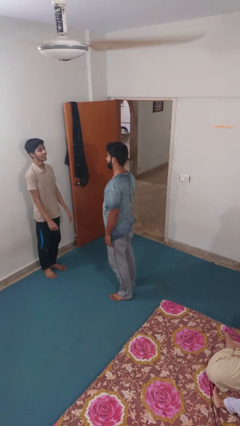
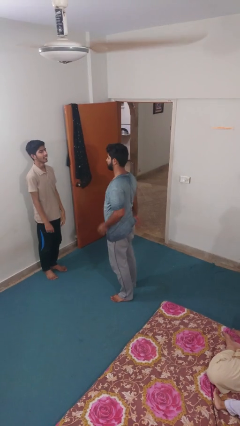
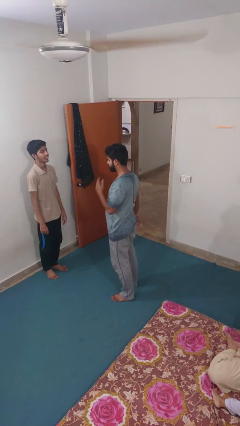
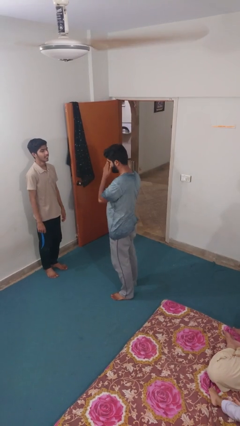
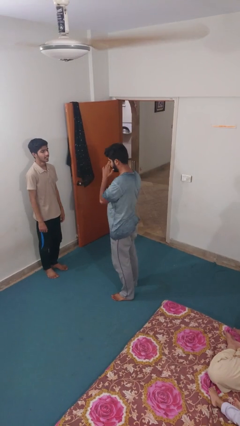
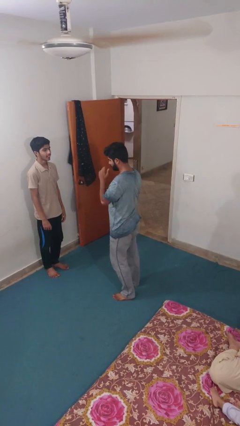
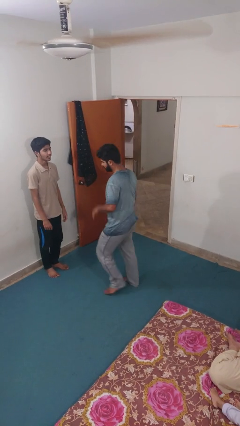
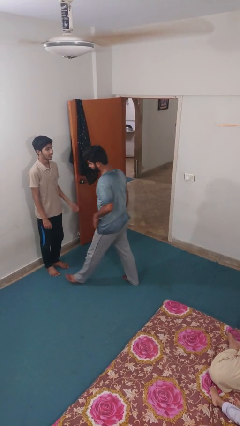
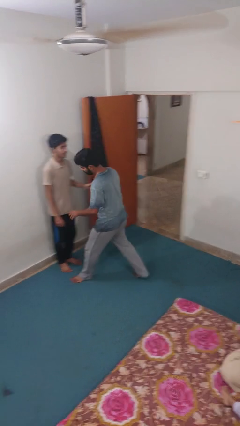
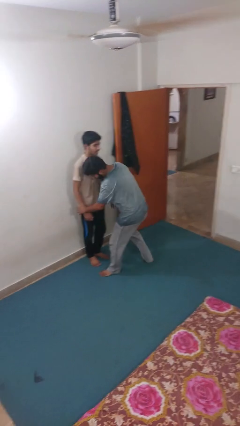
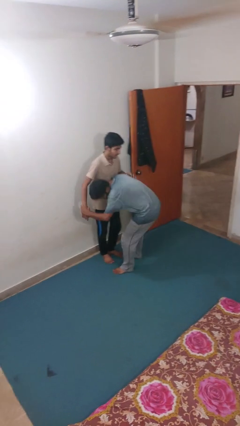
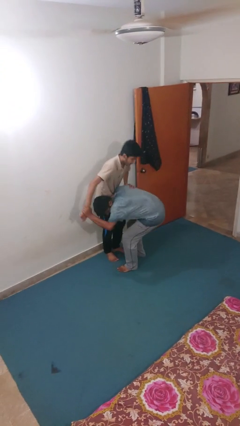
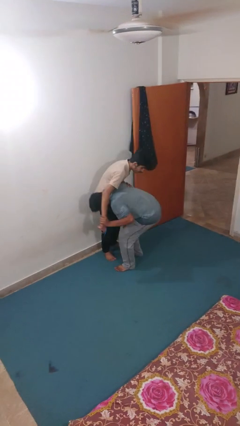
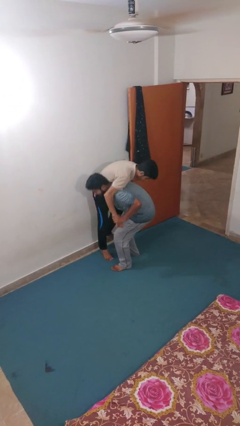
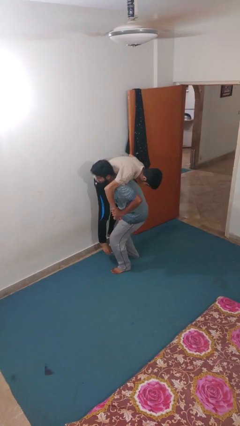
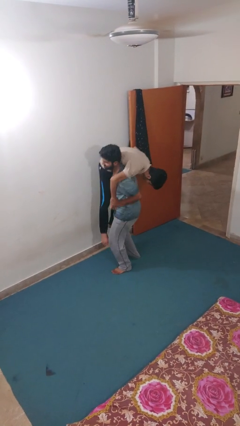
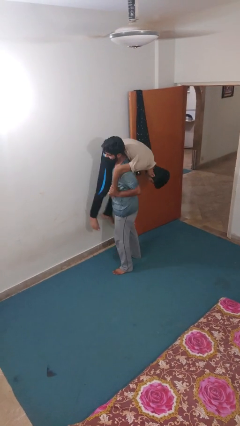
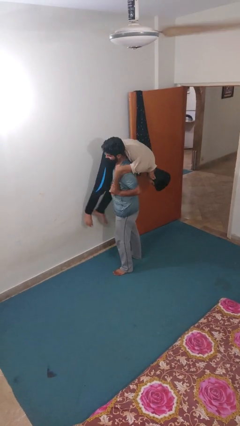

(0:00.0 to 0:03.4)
person carries person over shoulder

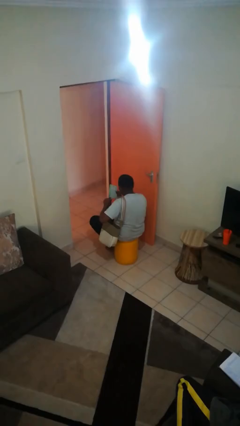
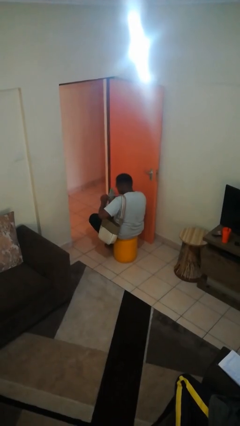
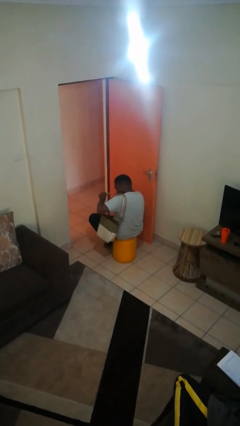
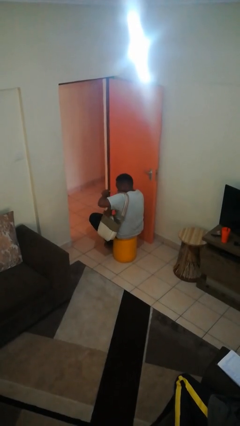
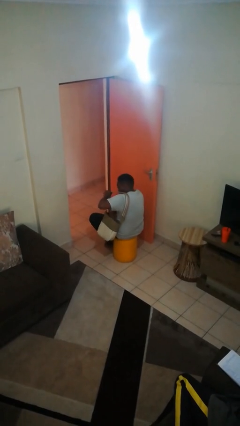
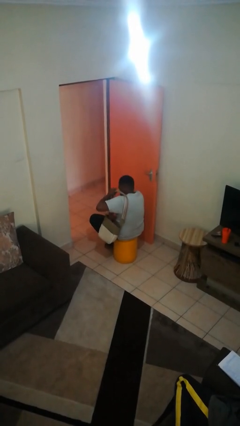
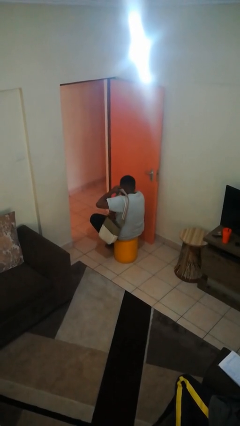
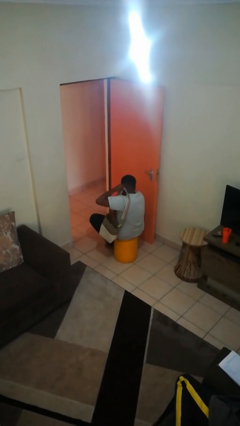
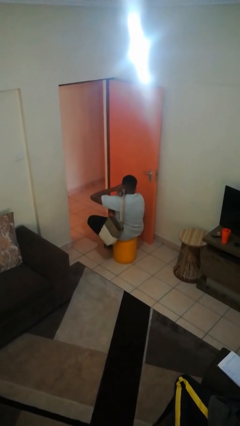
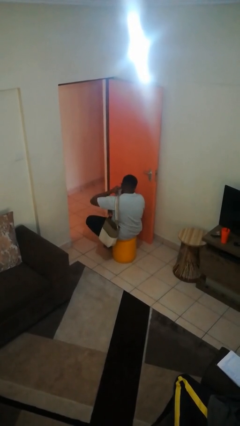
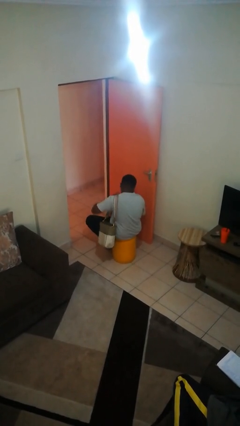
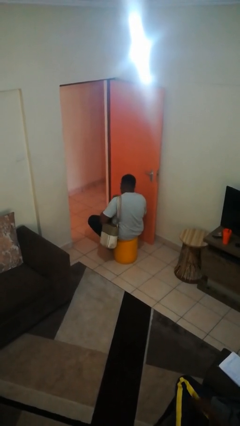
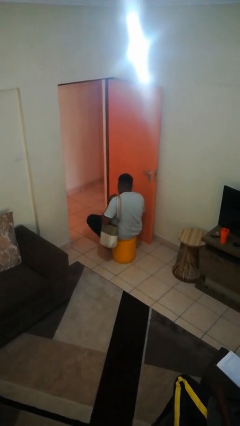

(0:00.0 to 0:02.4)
person puts object into purse

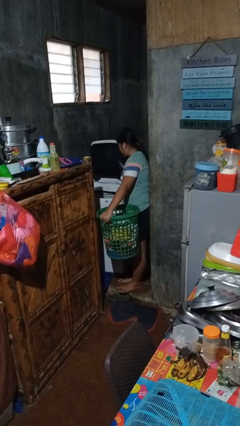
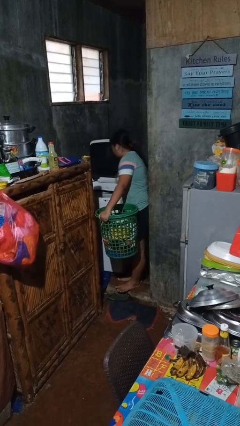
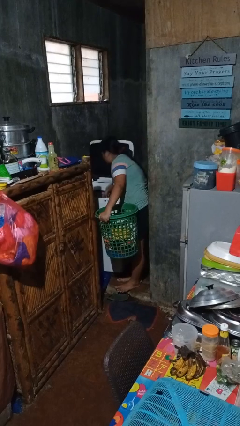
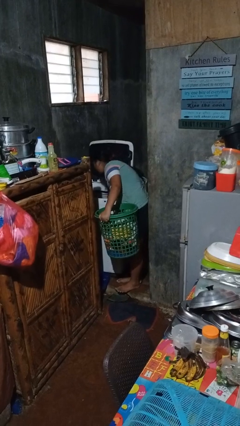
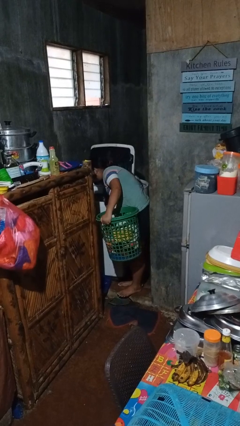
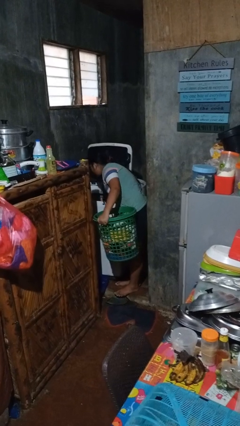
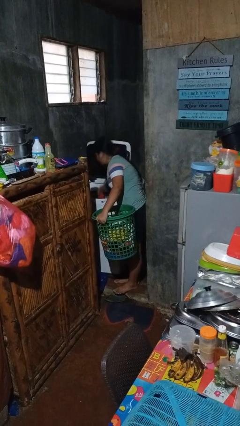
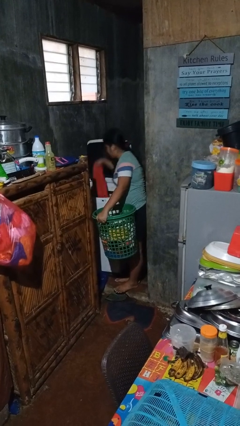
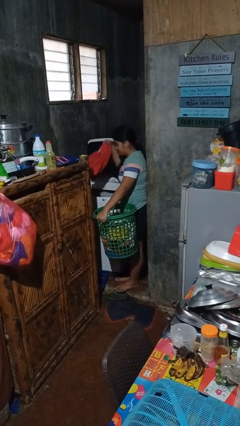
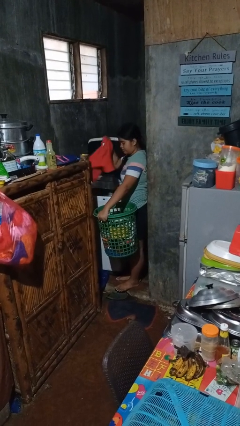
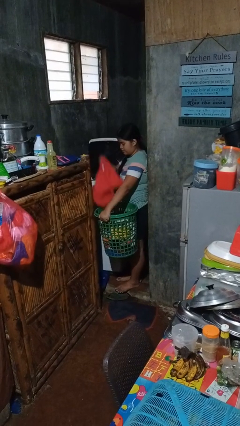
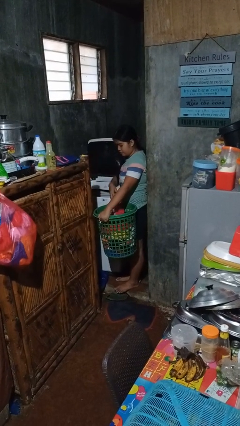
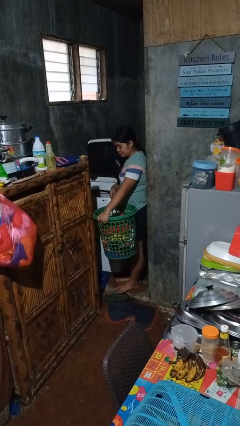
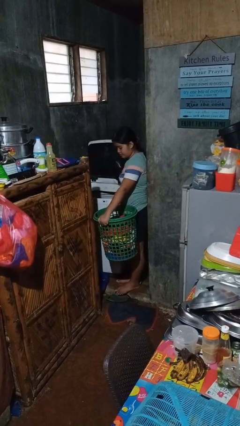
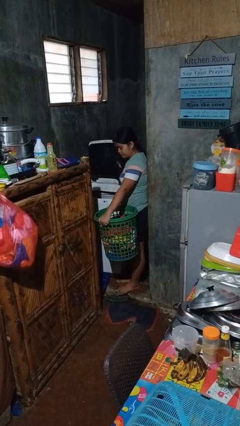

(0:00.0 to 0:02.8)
person unloads clotheswasher

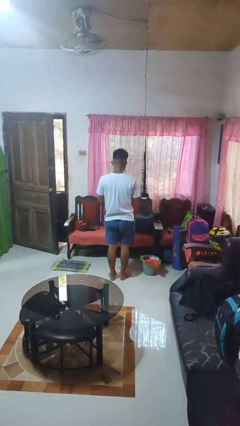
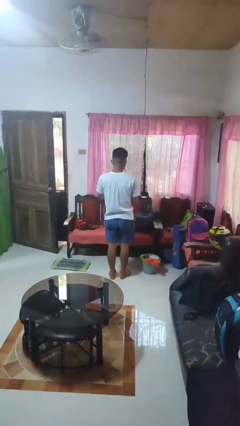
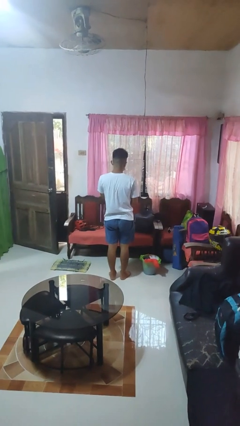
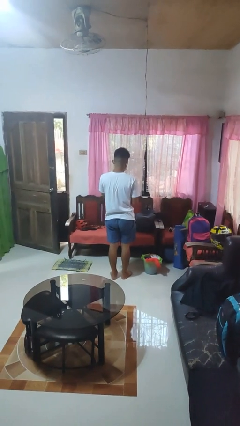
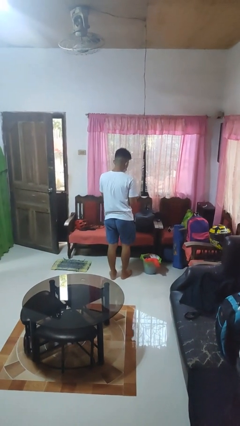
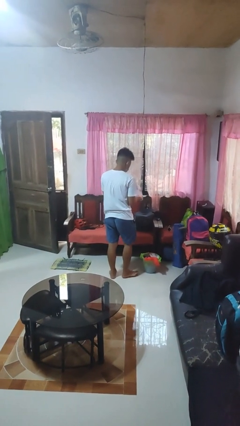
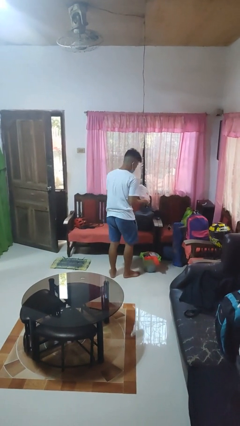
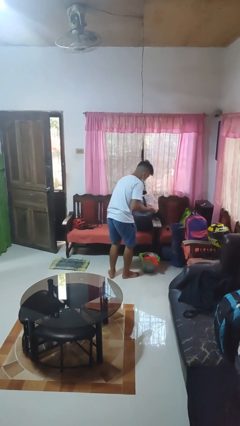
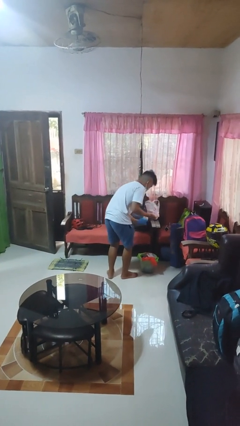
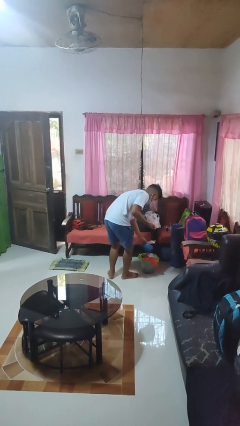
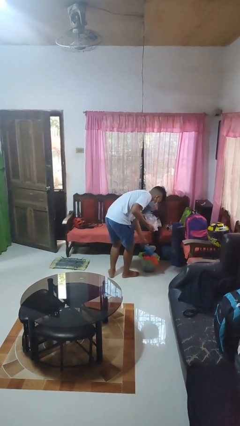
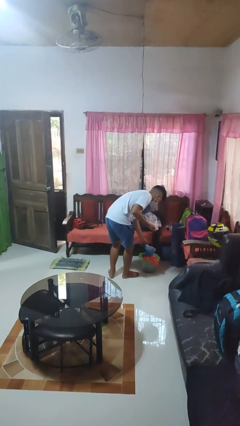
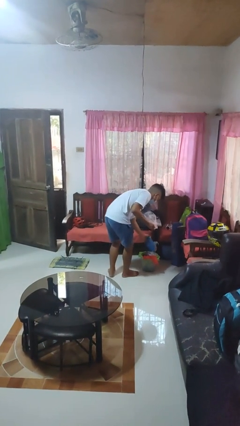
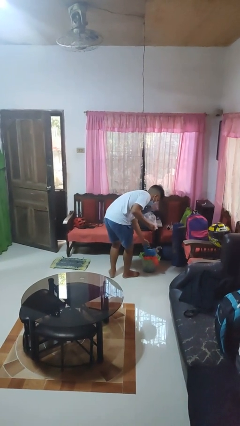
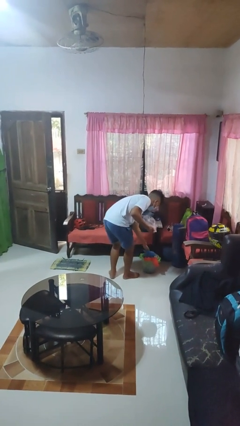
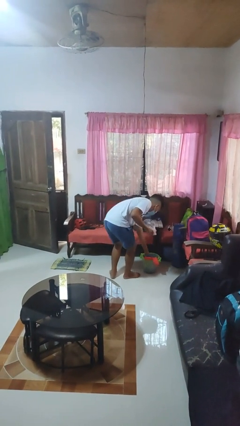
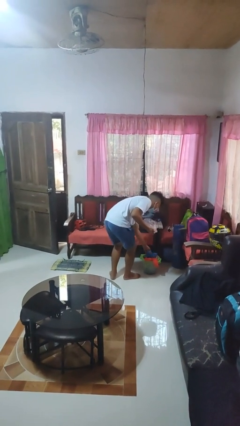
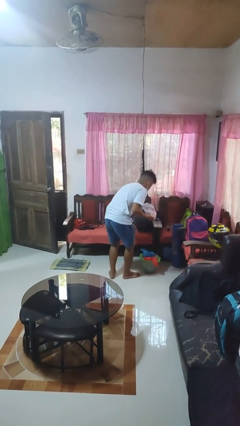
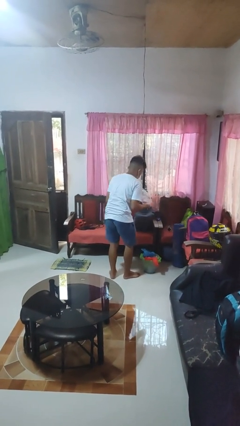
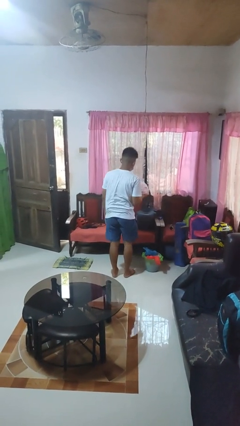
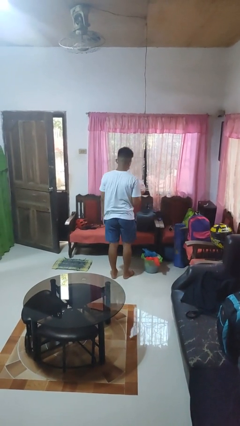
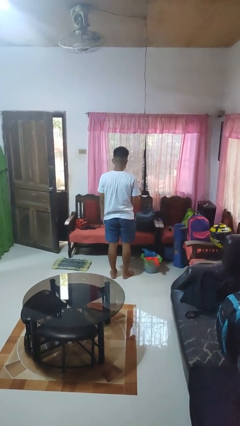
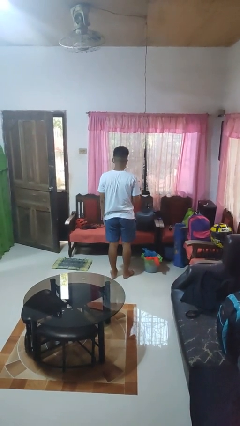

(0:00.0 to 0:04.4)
person discards trash

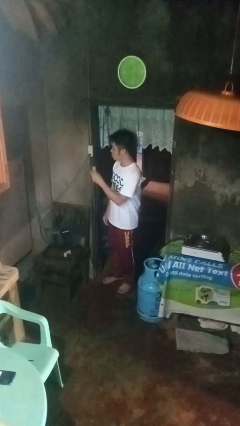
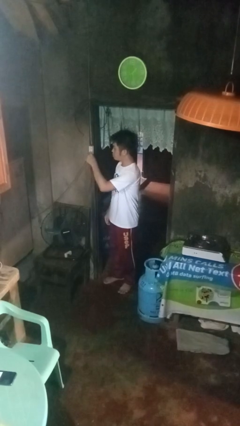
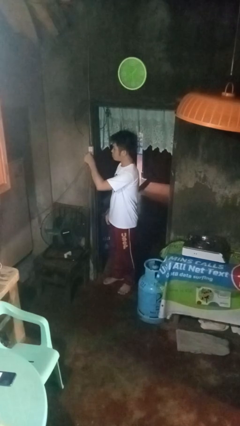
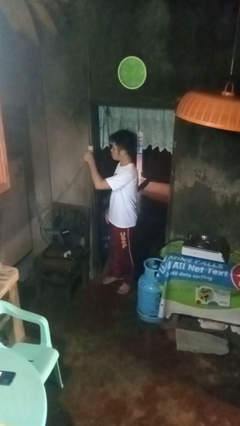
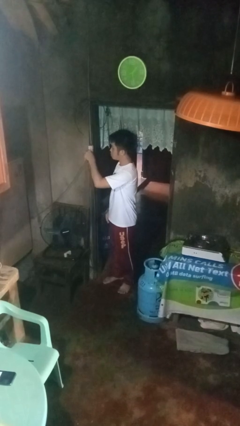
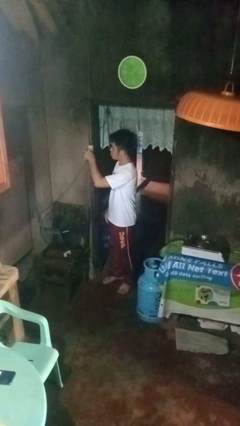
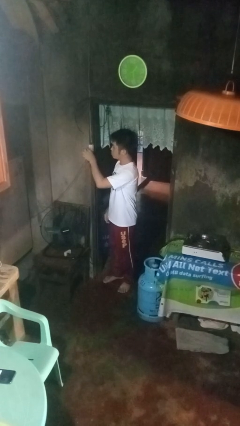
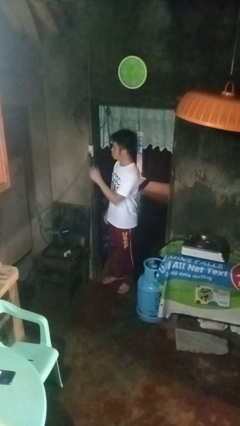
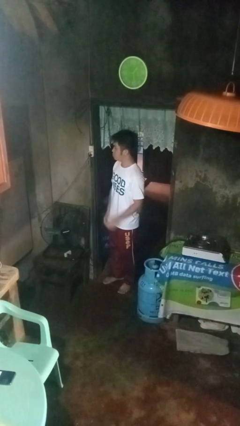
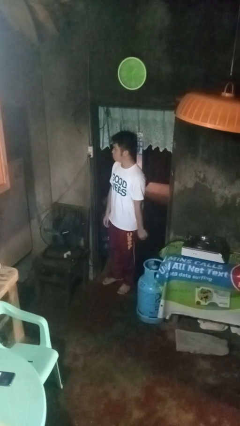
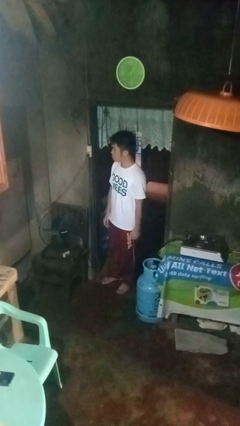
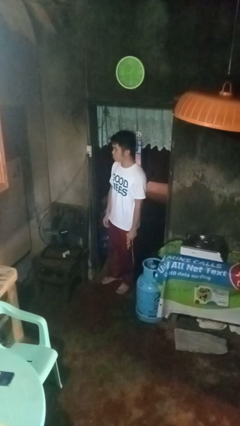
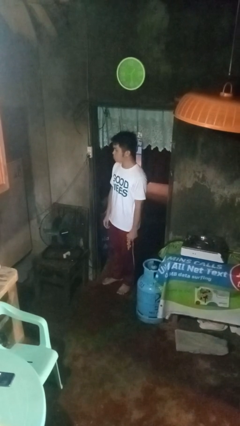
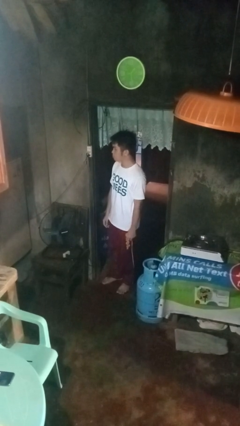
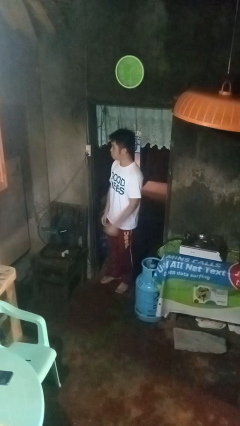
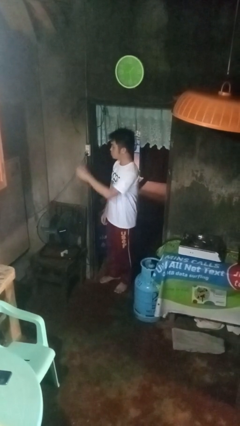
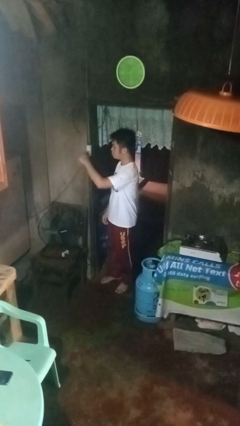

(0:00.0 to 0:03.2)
person plugs into electrical socket

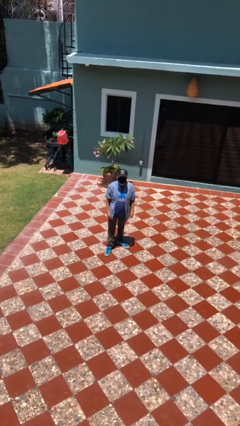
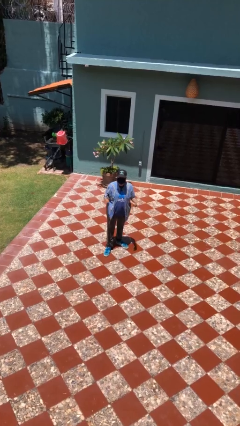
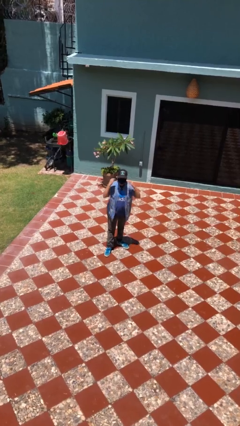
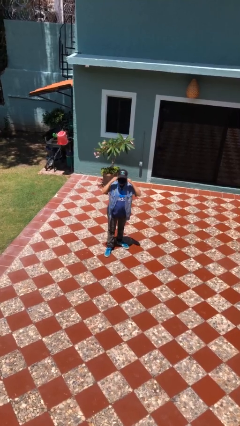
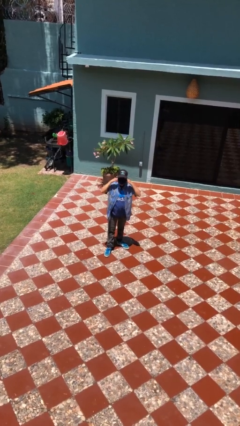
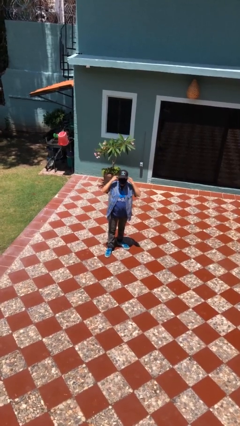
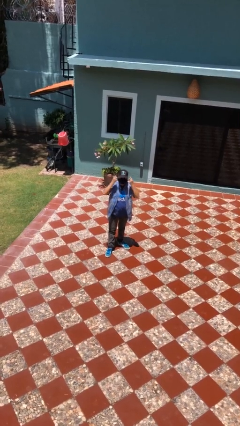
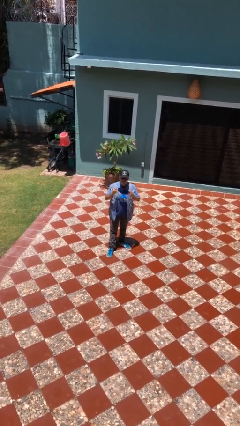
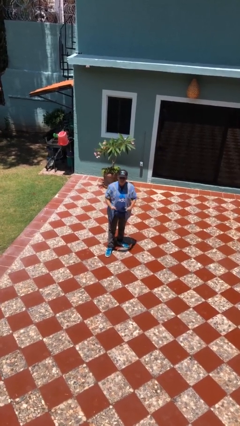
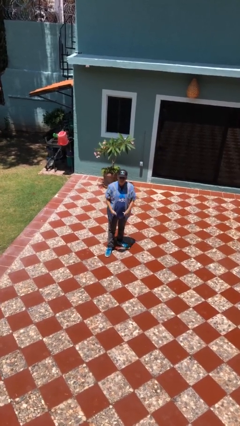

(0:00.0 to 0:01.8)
person takes off facemask
